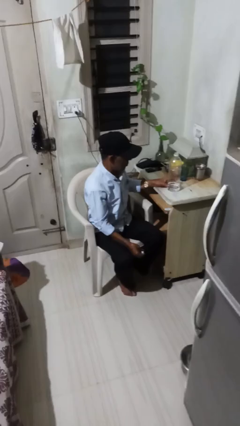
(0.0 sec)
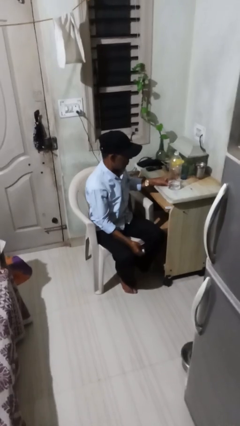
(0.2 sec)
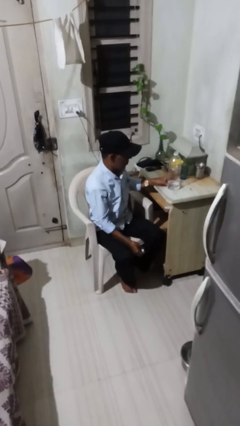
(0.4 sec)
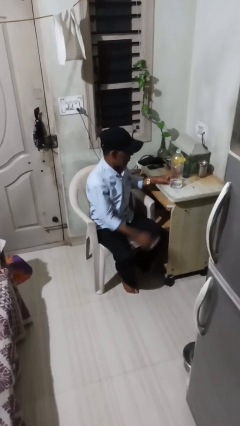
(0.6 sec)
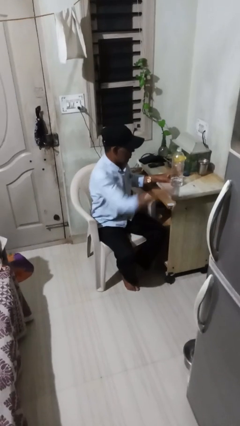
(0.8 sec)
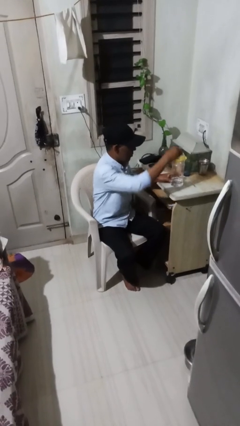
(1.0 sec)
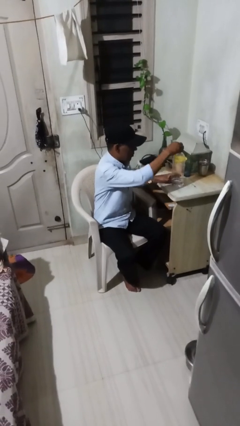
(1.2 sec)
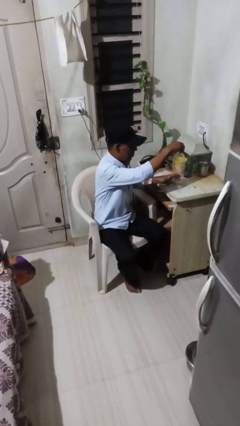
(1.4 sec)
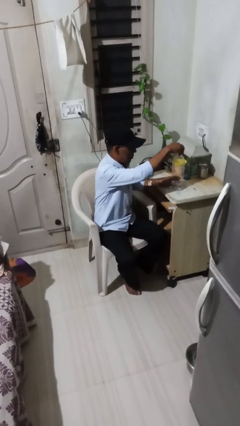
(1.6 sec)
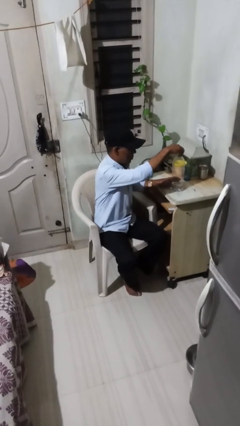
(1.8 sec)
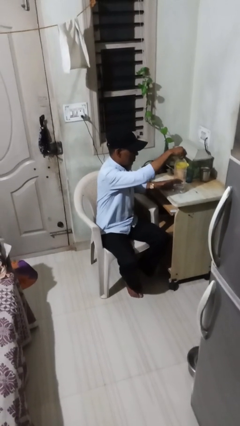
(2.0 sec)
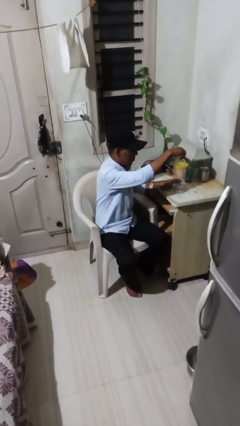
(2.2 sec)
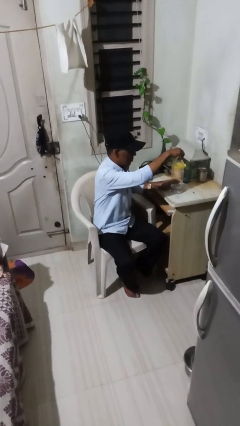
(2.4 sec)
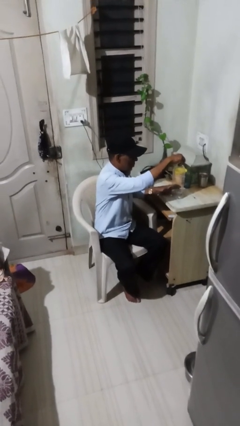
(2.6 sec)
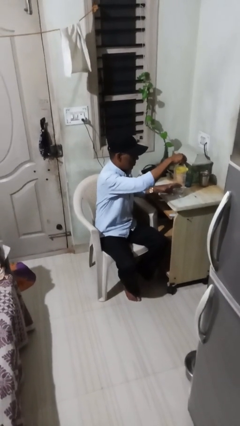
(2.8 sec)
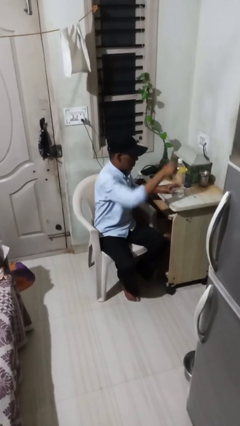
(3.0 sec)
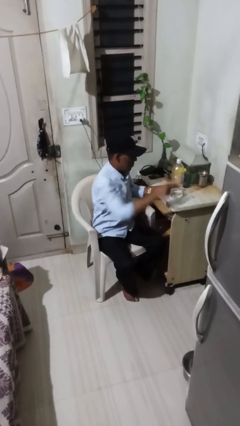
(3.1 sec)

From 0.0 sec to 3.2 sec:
person screws lid to bottle

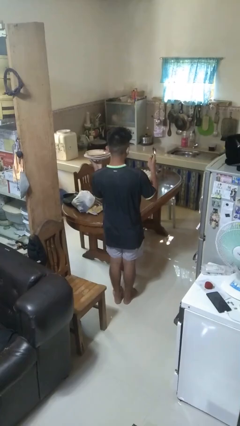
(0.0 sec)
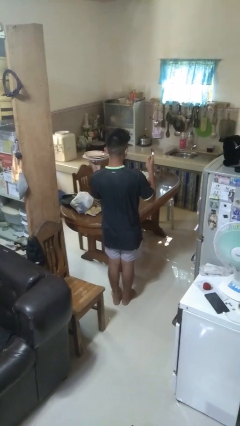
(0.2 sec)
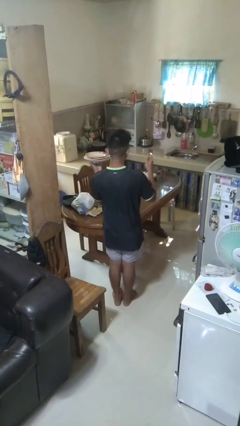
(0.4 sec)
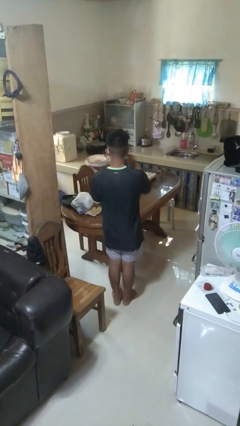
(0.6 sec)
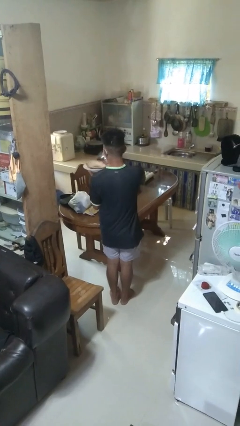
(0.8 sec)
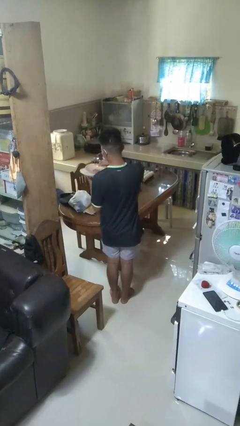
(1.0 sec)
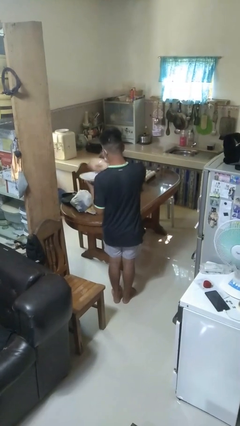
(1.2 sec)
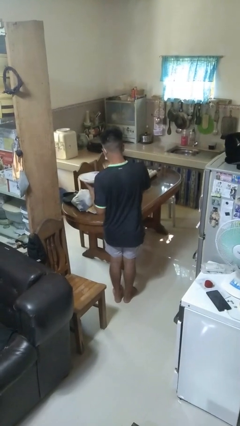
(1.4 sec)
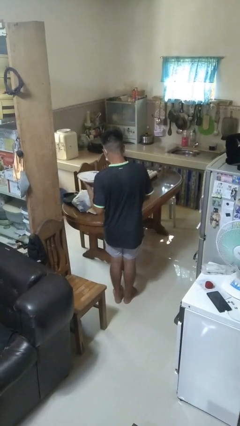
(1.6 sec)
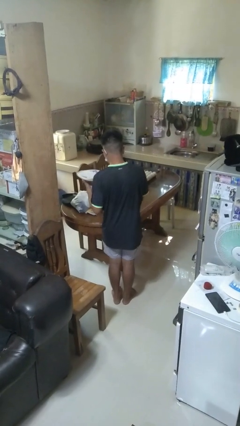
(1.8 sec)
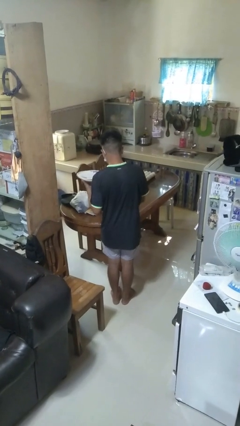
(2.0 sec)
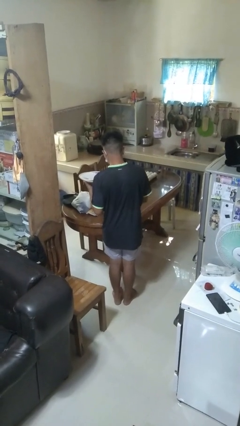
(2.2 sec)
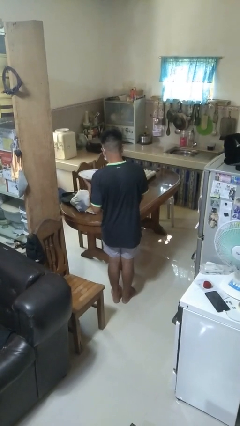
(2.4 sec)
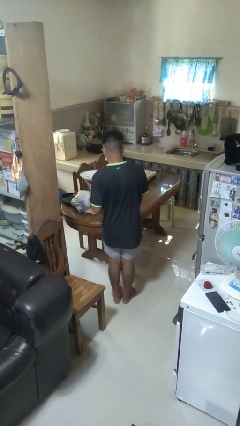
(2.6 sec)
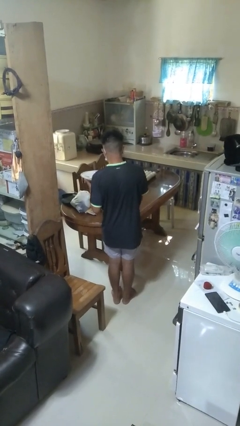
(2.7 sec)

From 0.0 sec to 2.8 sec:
person sets table

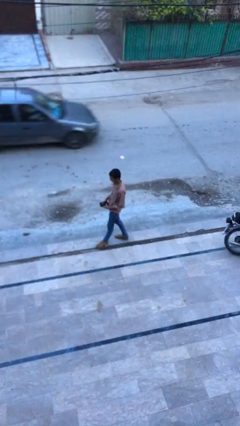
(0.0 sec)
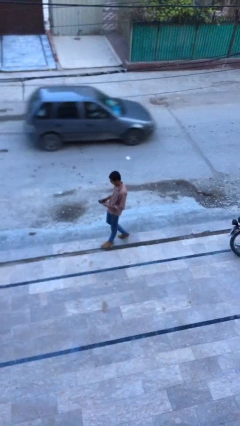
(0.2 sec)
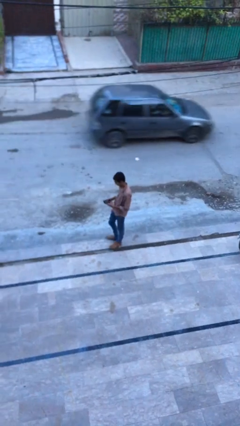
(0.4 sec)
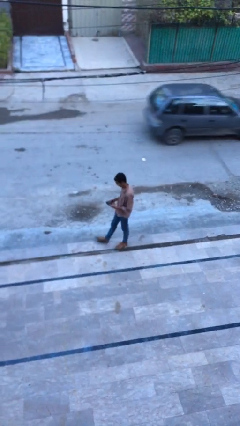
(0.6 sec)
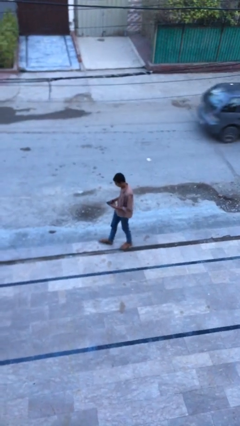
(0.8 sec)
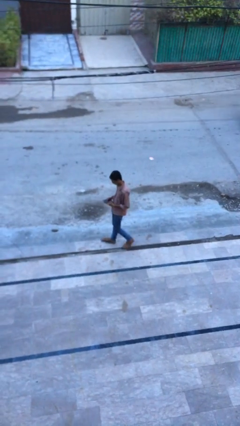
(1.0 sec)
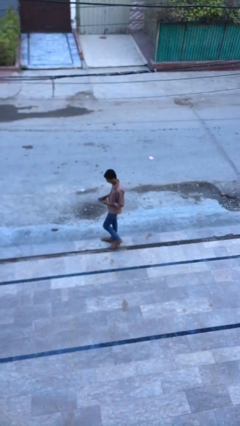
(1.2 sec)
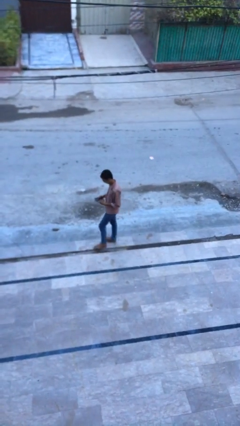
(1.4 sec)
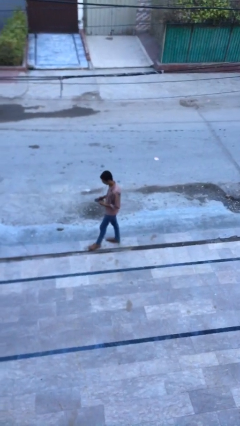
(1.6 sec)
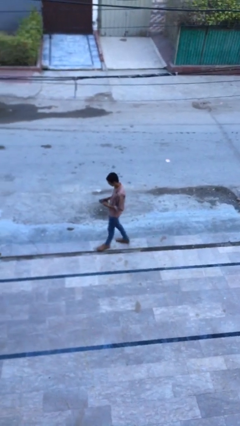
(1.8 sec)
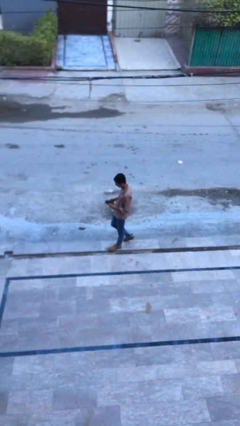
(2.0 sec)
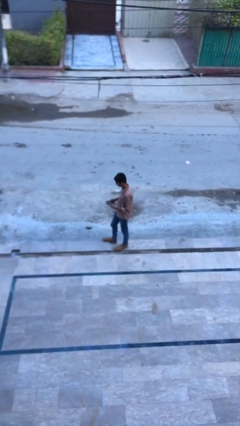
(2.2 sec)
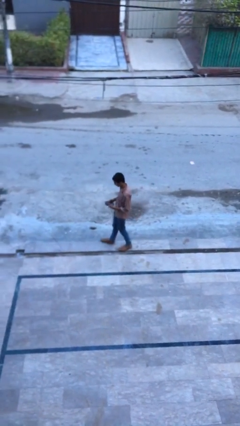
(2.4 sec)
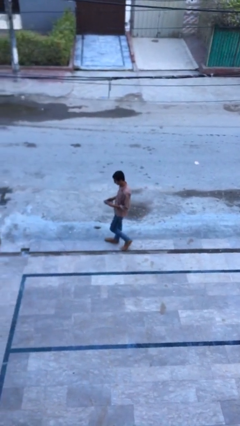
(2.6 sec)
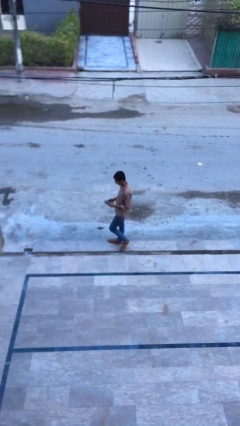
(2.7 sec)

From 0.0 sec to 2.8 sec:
person texts on phone

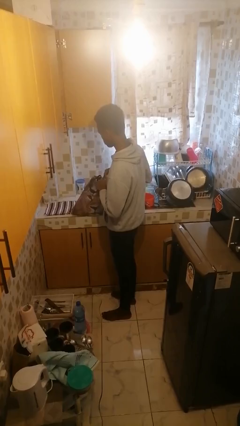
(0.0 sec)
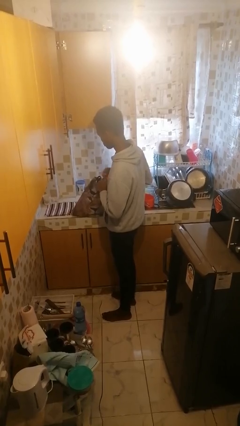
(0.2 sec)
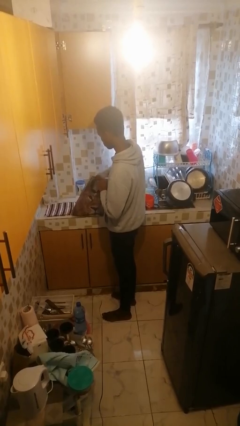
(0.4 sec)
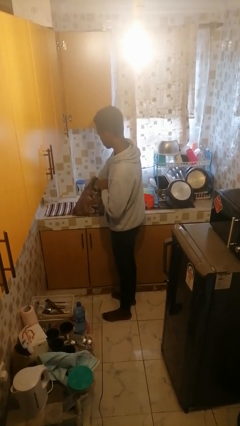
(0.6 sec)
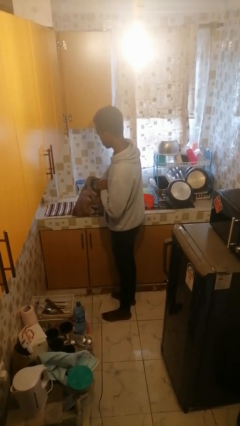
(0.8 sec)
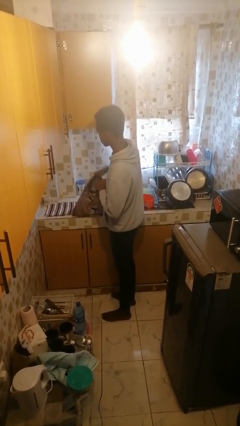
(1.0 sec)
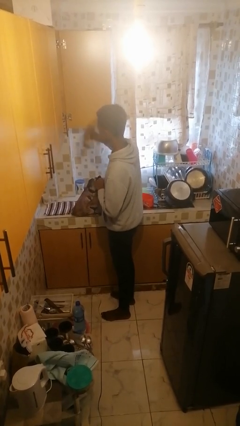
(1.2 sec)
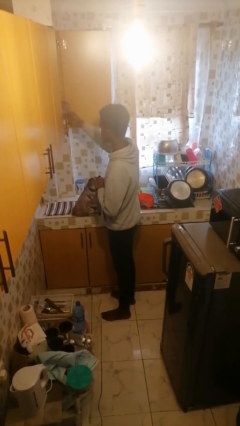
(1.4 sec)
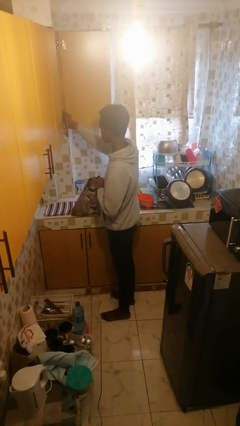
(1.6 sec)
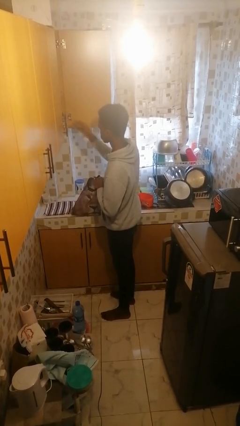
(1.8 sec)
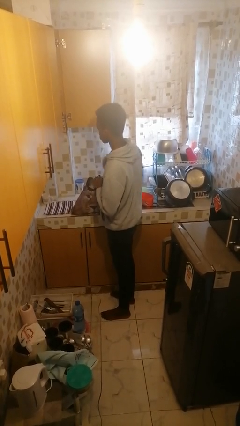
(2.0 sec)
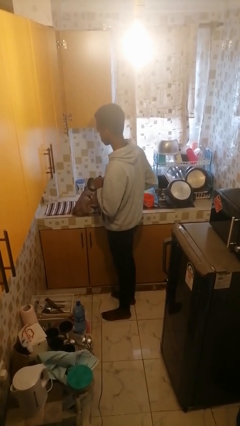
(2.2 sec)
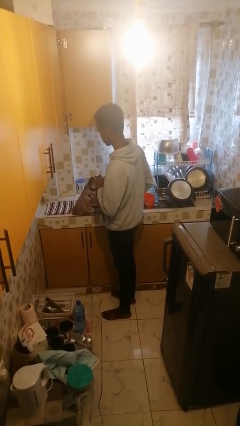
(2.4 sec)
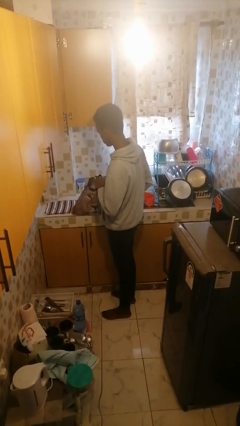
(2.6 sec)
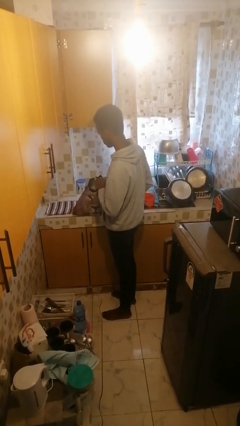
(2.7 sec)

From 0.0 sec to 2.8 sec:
person loads groceries into cabinet

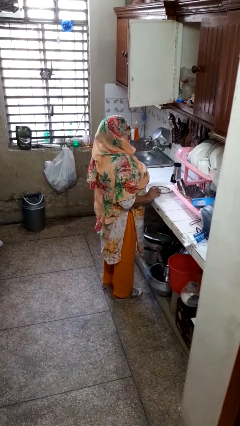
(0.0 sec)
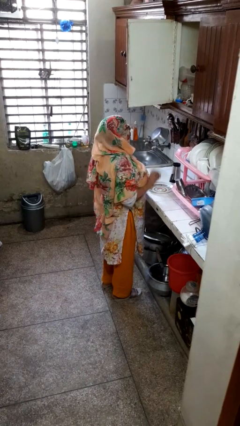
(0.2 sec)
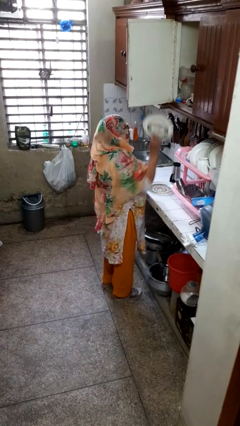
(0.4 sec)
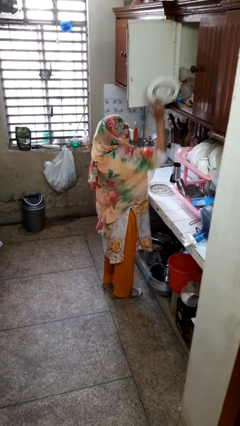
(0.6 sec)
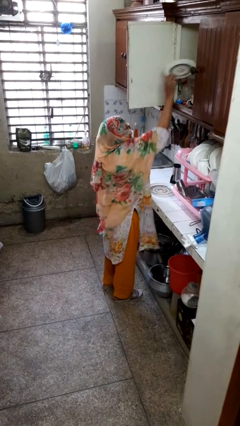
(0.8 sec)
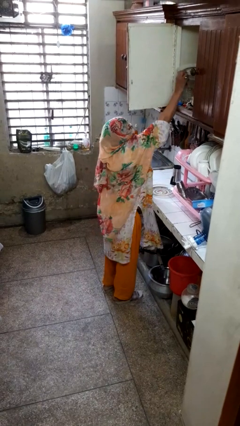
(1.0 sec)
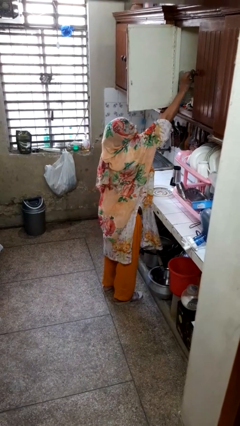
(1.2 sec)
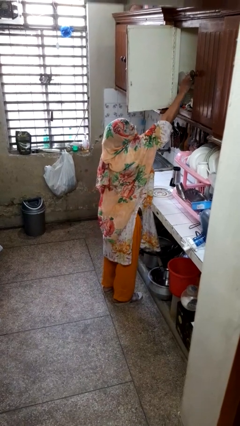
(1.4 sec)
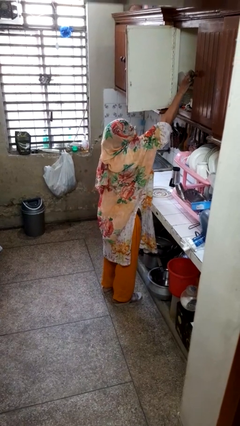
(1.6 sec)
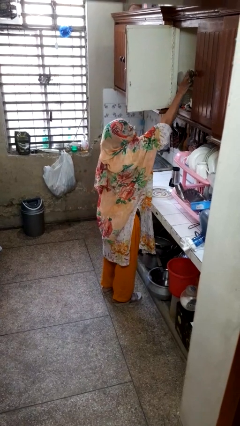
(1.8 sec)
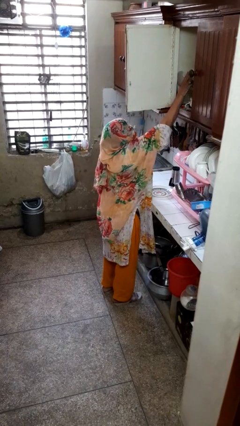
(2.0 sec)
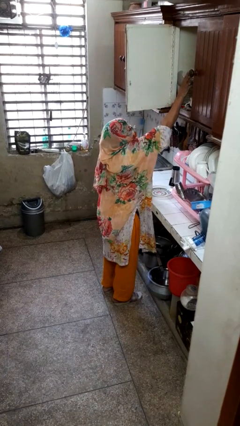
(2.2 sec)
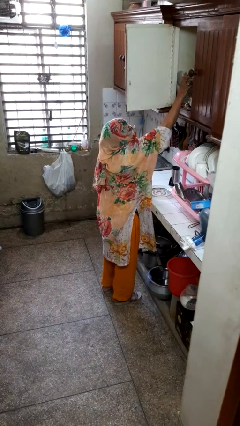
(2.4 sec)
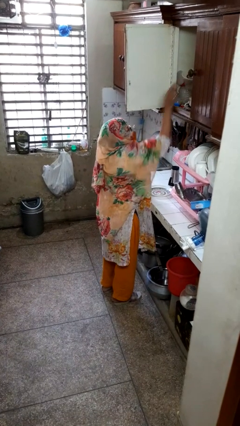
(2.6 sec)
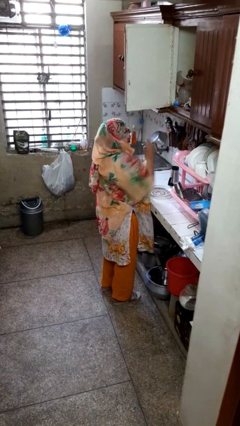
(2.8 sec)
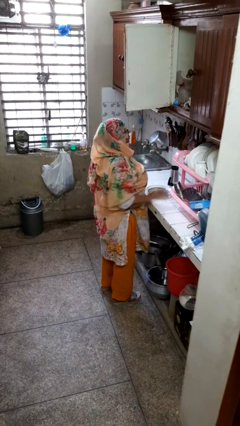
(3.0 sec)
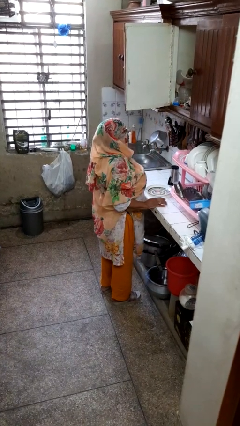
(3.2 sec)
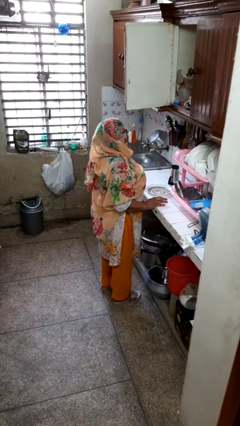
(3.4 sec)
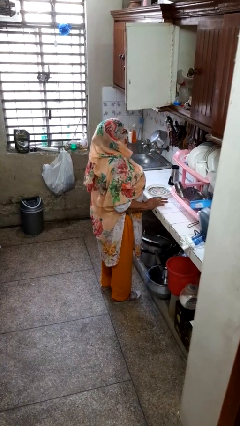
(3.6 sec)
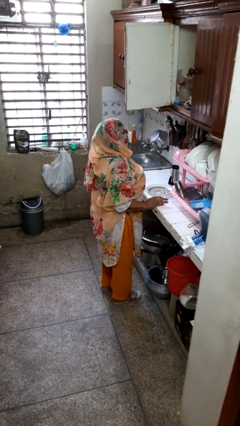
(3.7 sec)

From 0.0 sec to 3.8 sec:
person puts object in cabinet

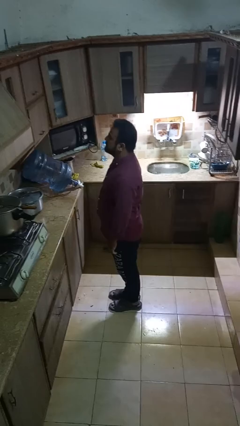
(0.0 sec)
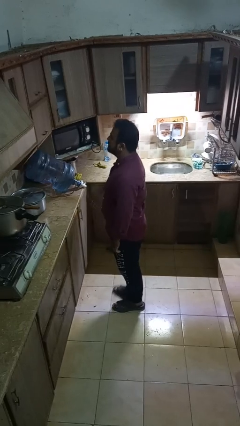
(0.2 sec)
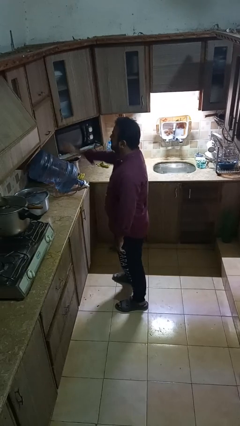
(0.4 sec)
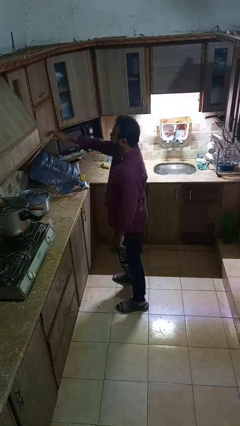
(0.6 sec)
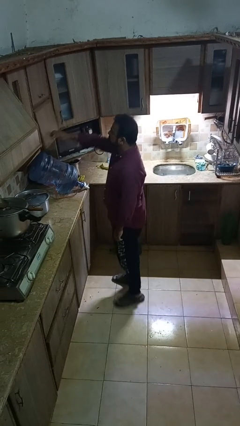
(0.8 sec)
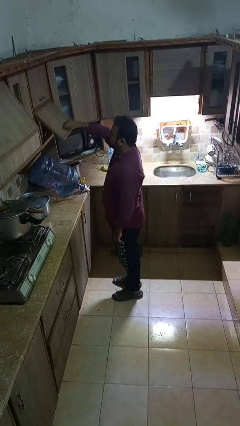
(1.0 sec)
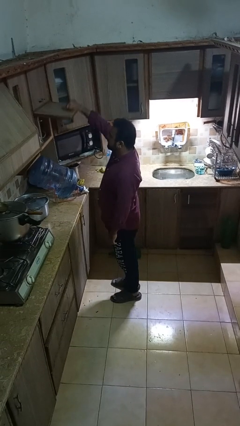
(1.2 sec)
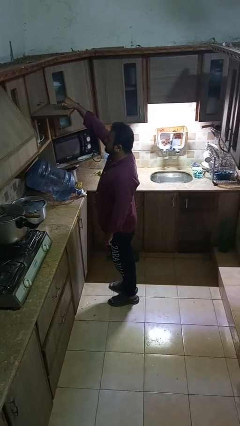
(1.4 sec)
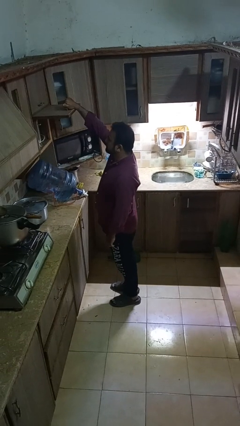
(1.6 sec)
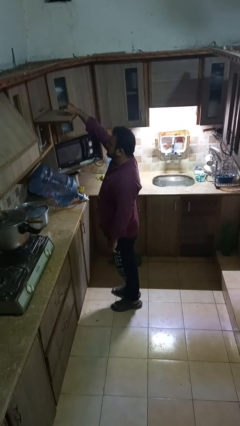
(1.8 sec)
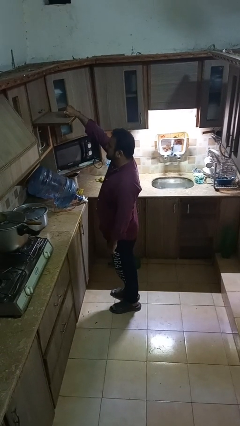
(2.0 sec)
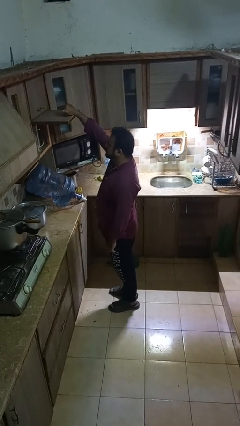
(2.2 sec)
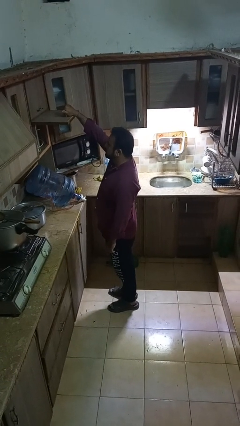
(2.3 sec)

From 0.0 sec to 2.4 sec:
person opens cabinet
